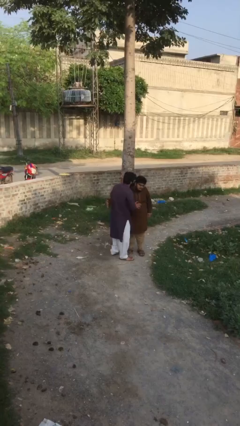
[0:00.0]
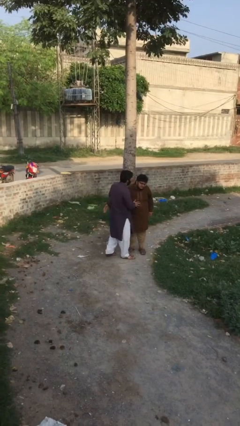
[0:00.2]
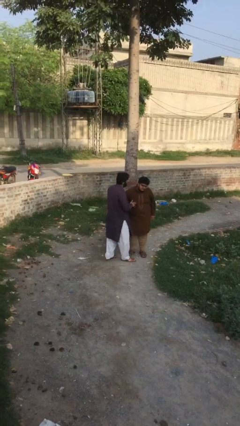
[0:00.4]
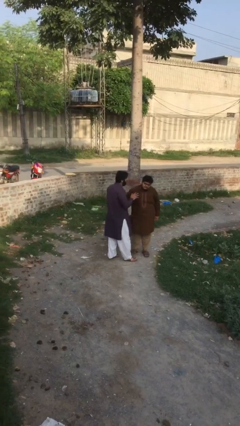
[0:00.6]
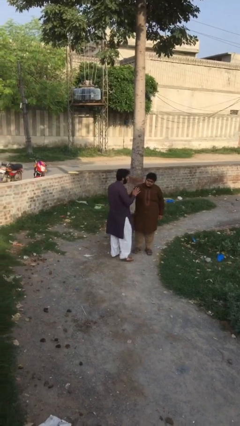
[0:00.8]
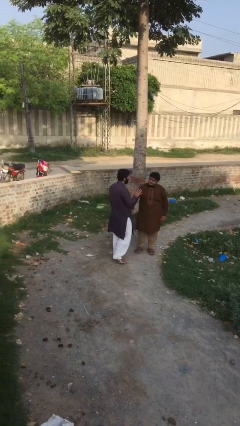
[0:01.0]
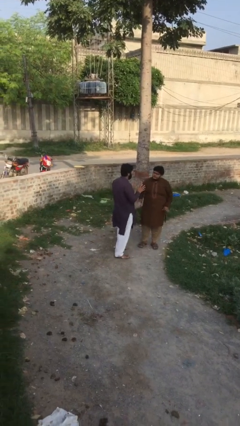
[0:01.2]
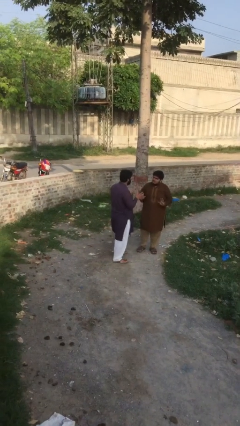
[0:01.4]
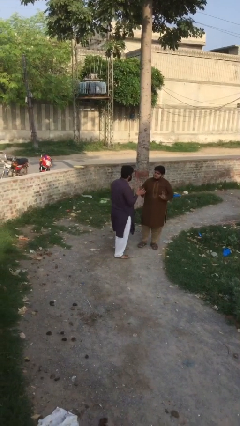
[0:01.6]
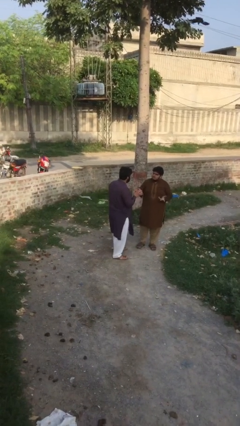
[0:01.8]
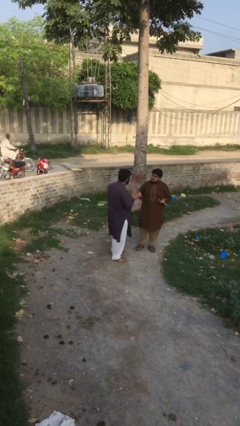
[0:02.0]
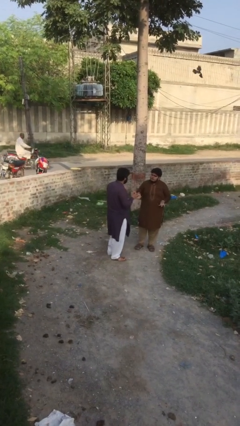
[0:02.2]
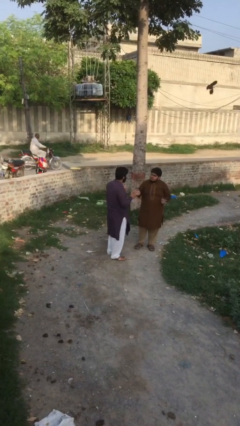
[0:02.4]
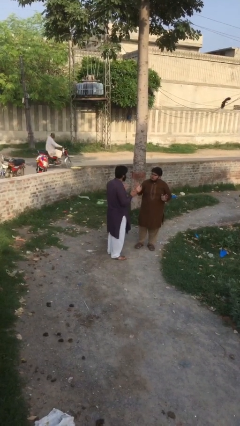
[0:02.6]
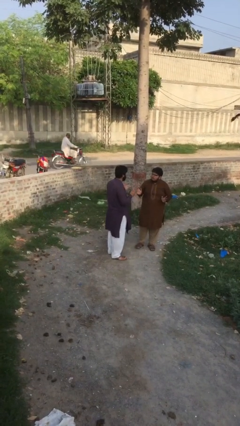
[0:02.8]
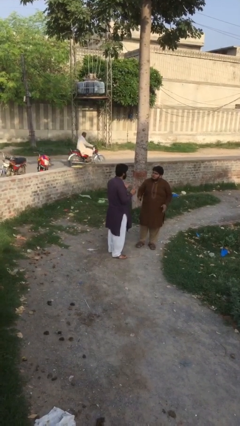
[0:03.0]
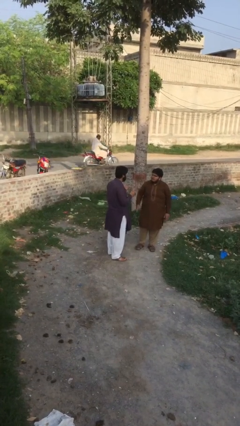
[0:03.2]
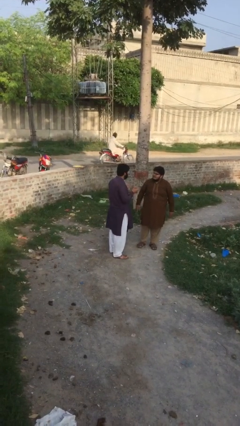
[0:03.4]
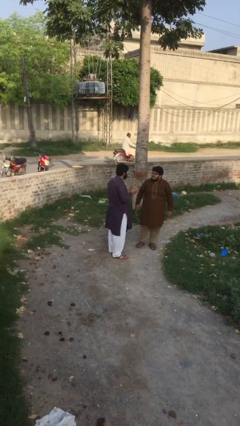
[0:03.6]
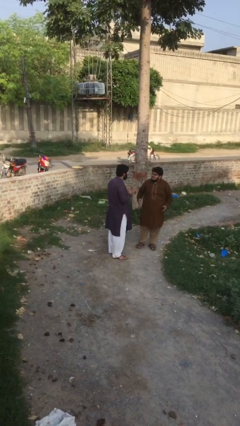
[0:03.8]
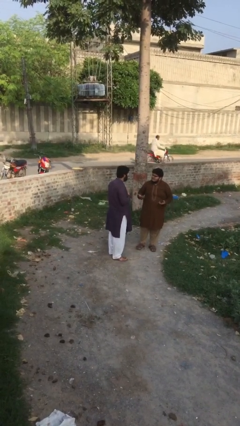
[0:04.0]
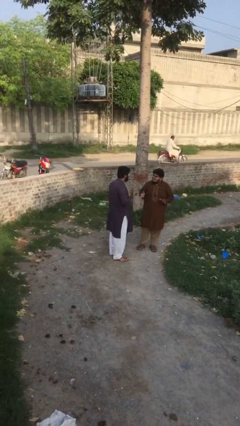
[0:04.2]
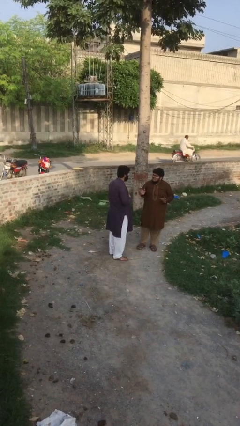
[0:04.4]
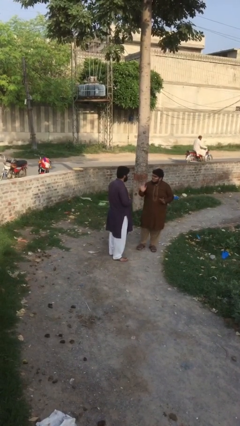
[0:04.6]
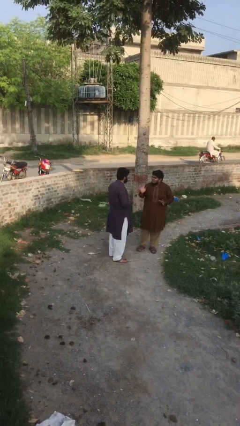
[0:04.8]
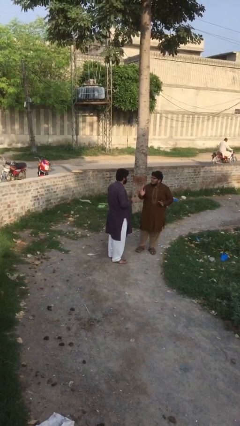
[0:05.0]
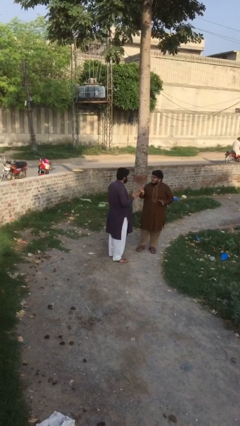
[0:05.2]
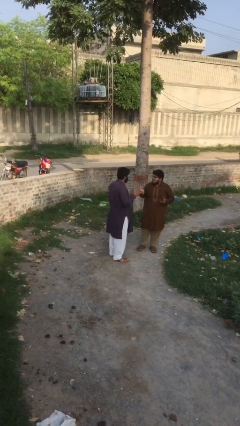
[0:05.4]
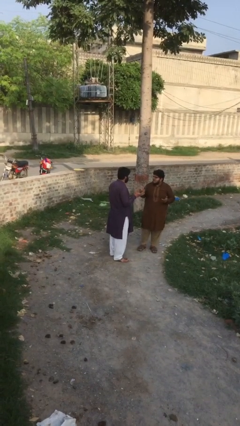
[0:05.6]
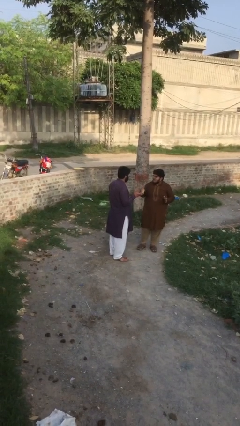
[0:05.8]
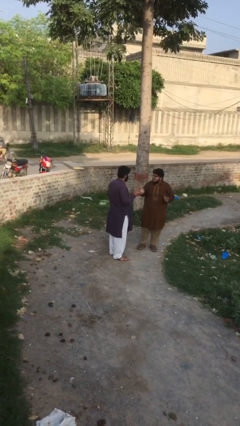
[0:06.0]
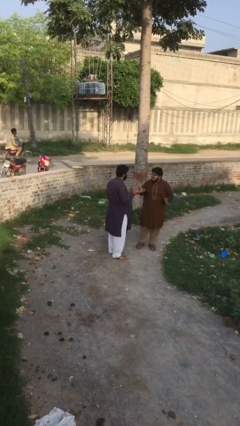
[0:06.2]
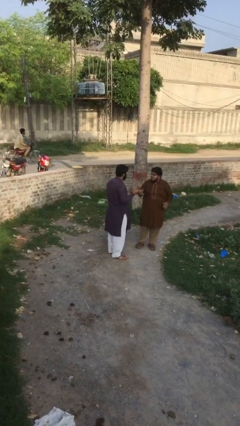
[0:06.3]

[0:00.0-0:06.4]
person talks to person

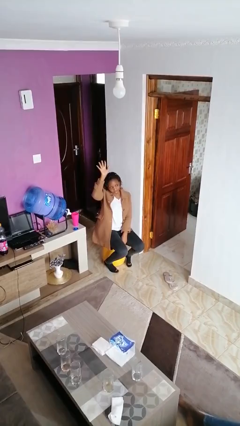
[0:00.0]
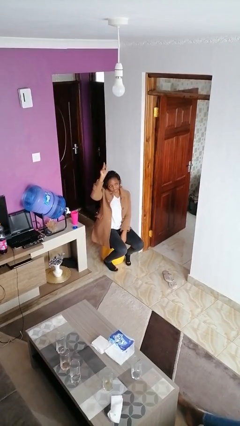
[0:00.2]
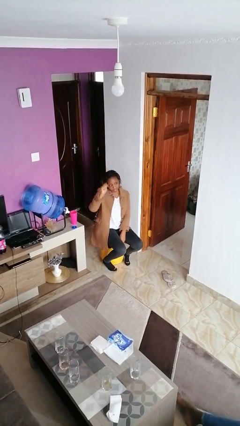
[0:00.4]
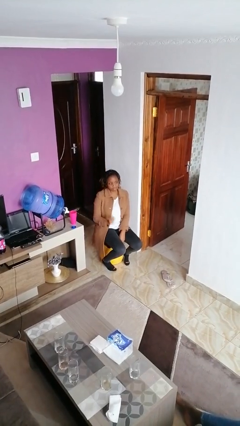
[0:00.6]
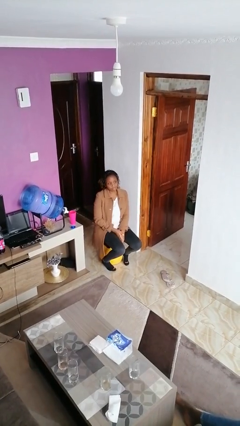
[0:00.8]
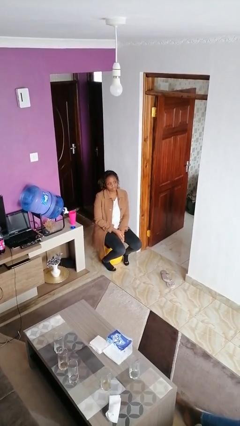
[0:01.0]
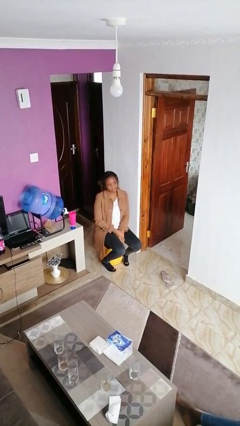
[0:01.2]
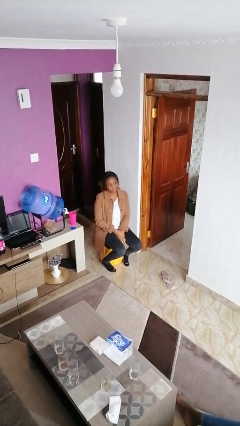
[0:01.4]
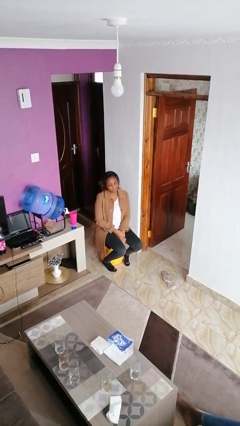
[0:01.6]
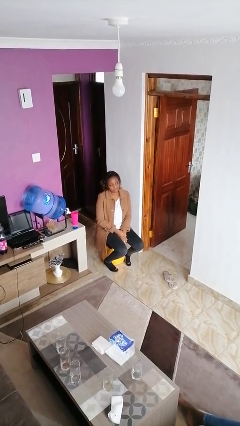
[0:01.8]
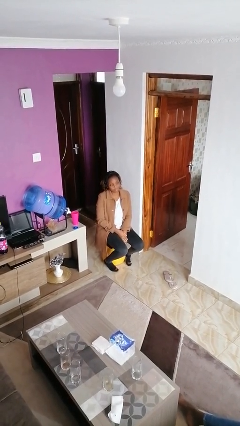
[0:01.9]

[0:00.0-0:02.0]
person gestures lower hand

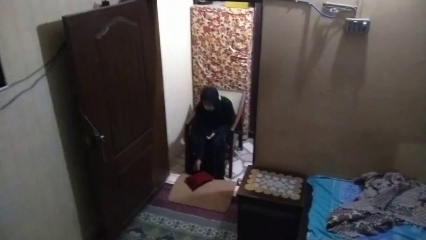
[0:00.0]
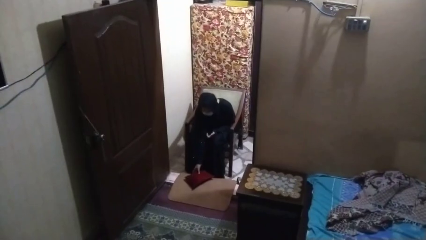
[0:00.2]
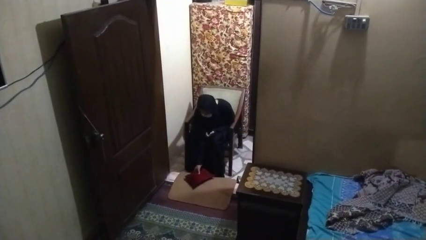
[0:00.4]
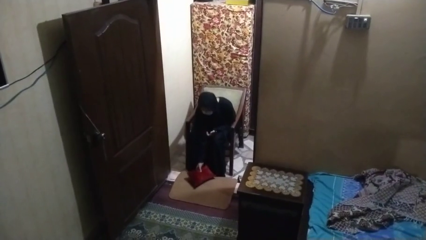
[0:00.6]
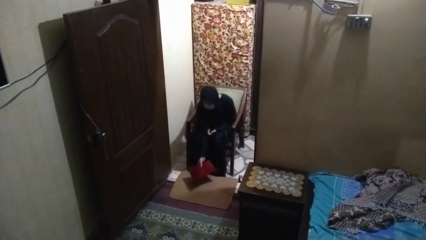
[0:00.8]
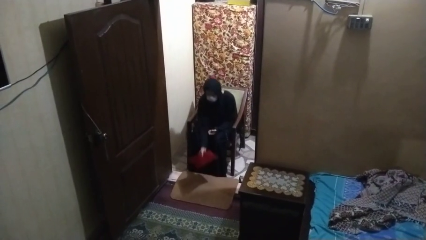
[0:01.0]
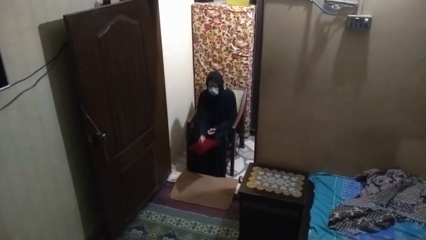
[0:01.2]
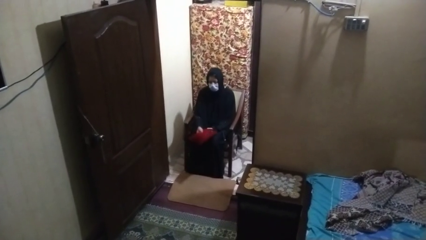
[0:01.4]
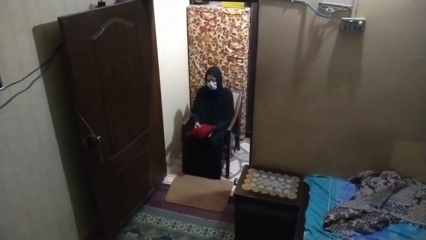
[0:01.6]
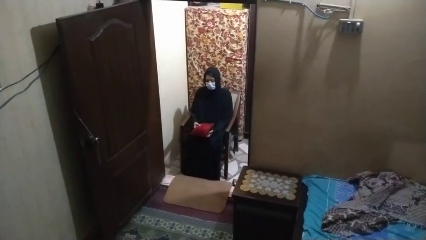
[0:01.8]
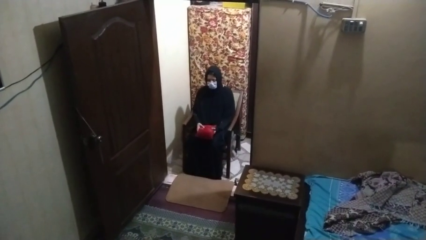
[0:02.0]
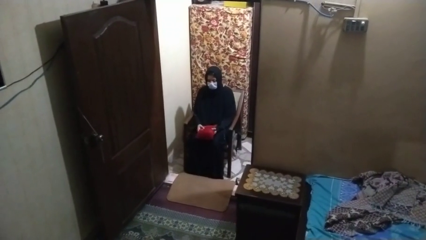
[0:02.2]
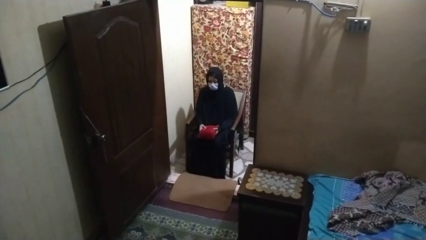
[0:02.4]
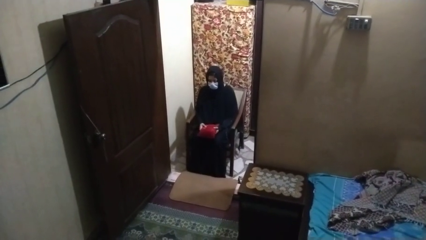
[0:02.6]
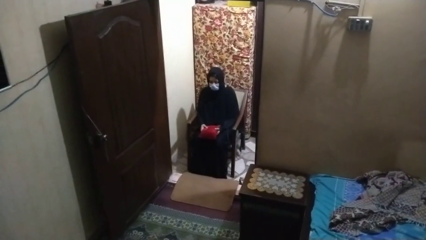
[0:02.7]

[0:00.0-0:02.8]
person picks up object from floor

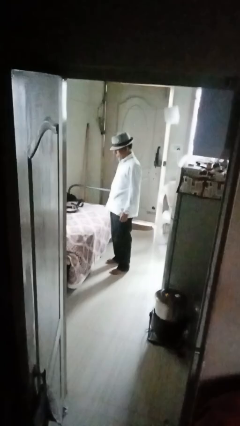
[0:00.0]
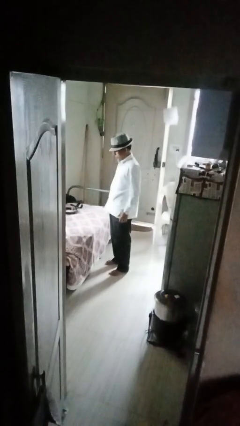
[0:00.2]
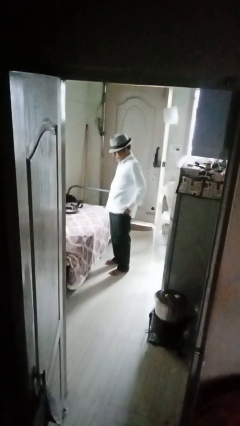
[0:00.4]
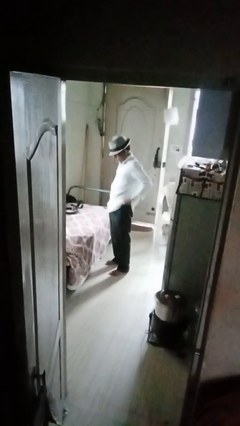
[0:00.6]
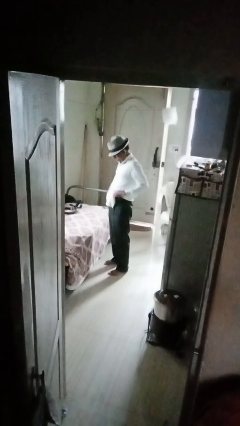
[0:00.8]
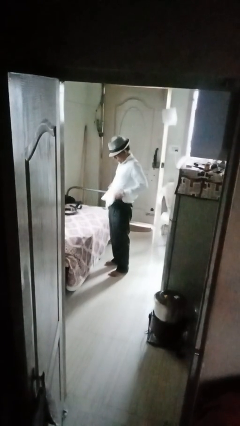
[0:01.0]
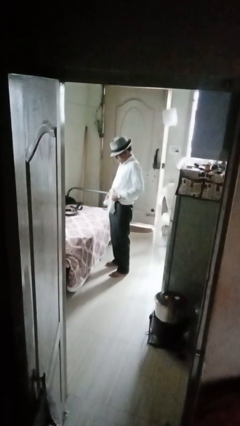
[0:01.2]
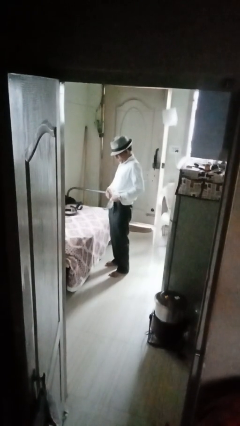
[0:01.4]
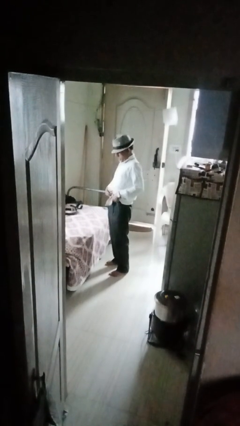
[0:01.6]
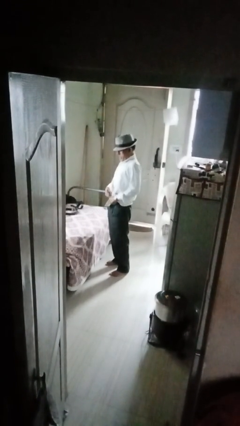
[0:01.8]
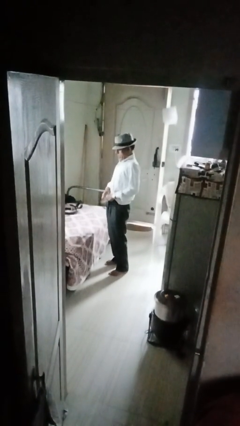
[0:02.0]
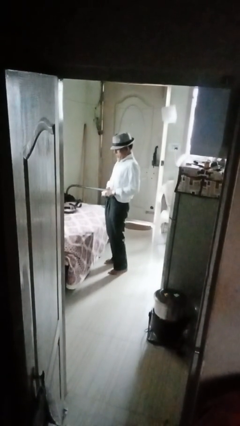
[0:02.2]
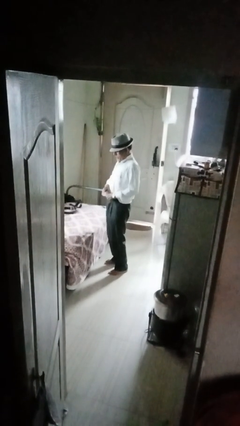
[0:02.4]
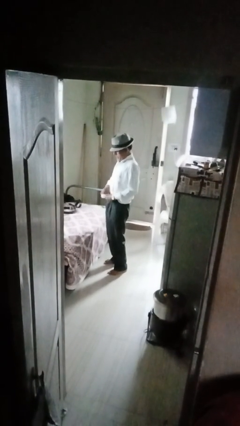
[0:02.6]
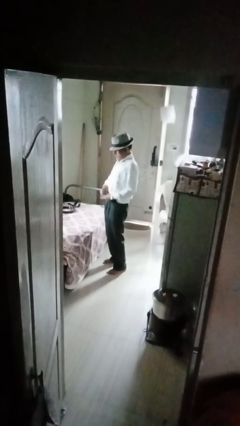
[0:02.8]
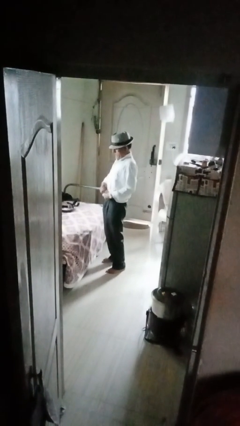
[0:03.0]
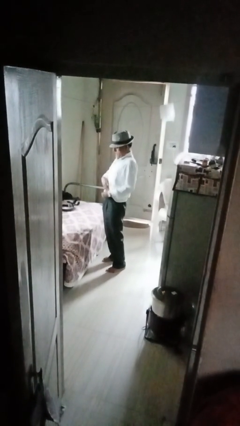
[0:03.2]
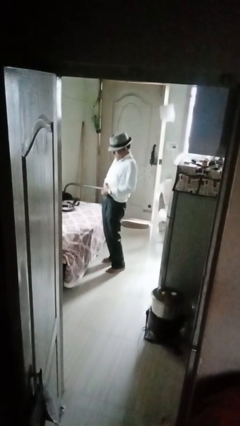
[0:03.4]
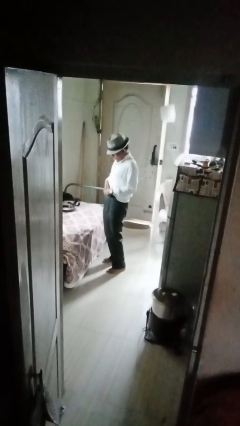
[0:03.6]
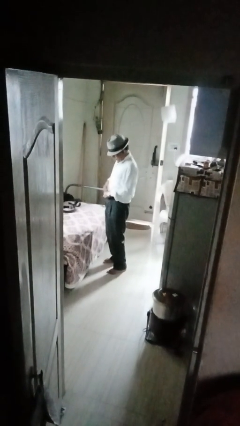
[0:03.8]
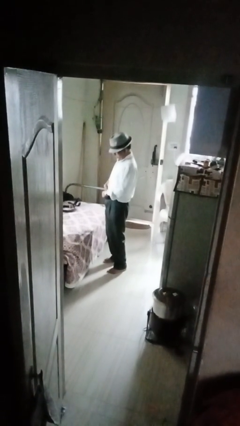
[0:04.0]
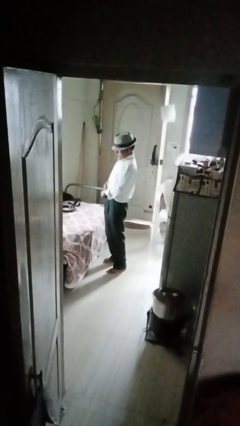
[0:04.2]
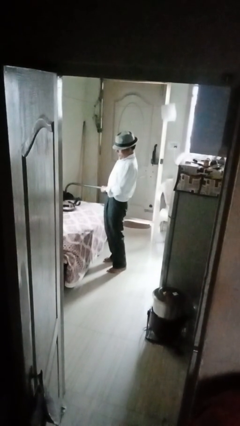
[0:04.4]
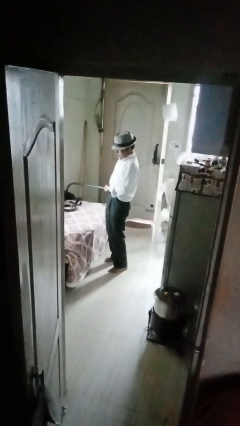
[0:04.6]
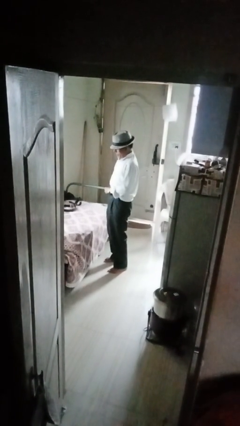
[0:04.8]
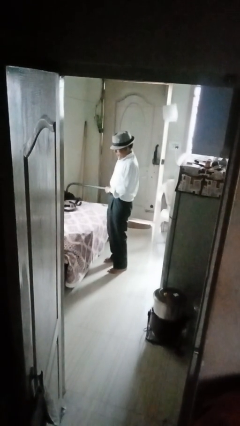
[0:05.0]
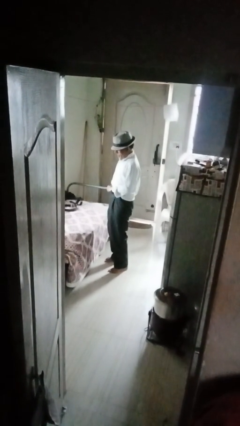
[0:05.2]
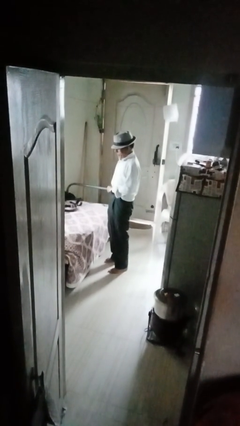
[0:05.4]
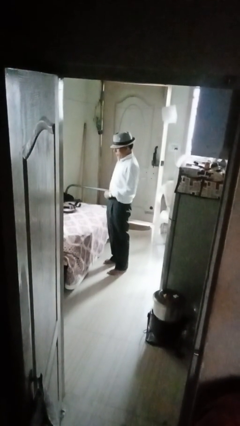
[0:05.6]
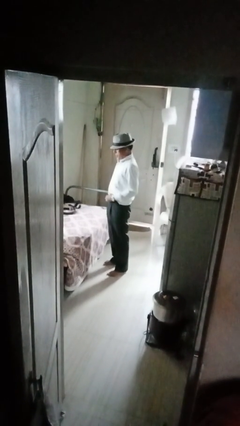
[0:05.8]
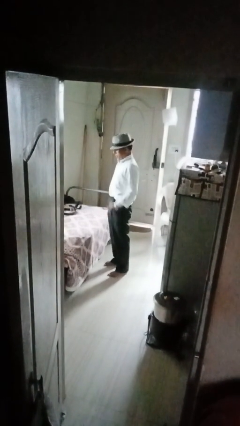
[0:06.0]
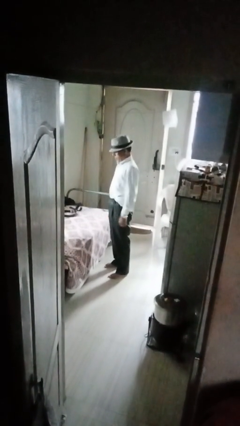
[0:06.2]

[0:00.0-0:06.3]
person tucks in shirt
